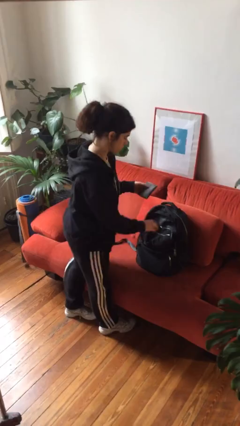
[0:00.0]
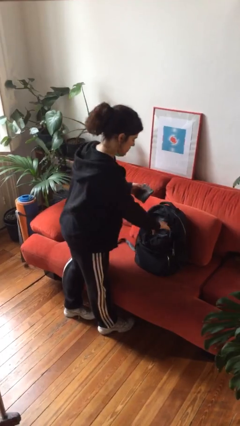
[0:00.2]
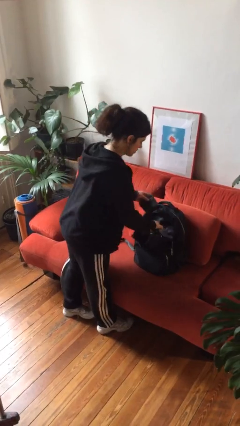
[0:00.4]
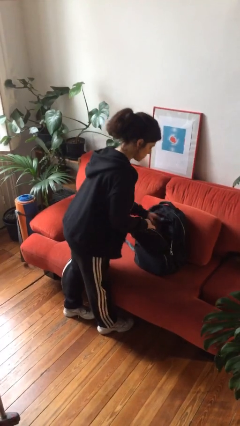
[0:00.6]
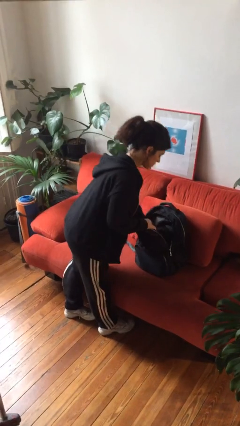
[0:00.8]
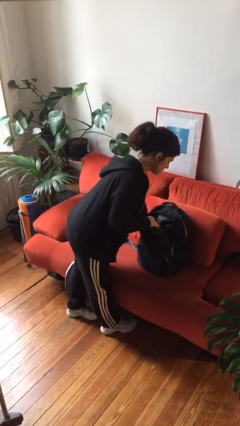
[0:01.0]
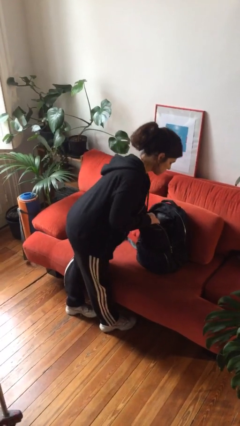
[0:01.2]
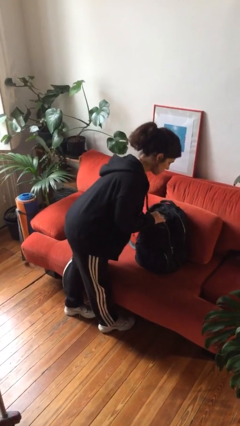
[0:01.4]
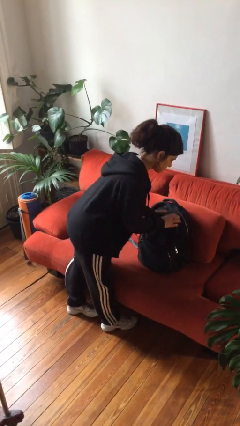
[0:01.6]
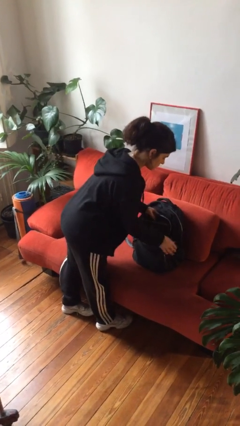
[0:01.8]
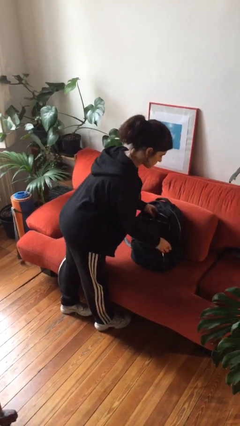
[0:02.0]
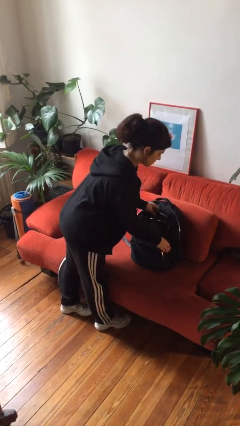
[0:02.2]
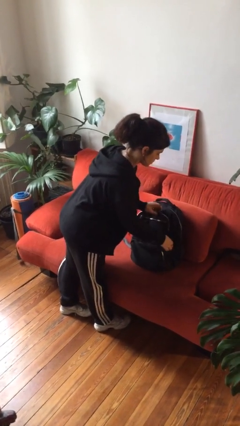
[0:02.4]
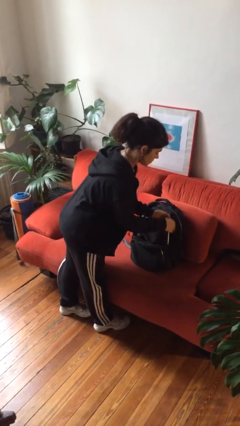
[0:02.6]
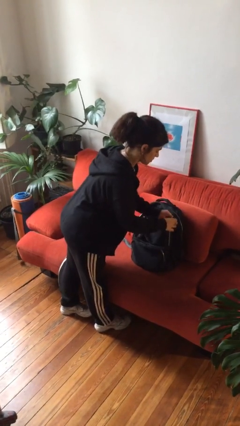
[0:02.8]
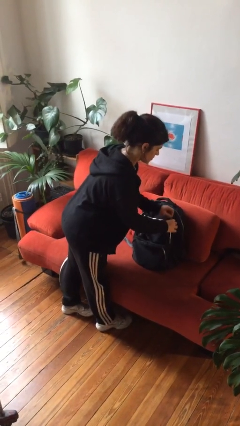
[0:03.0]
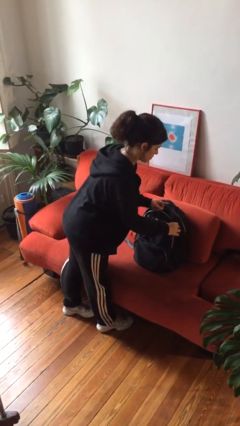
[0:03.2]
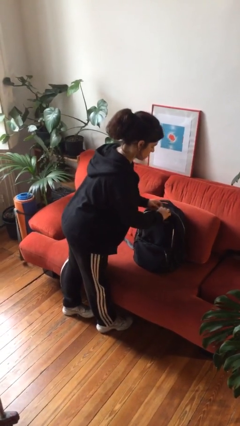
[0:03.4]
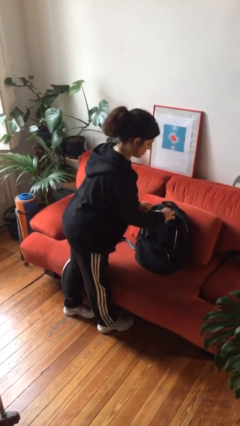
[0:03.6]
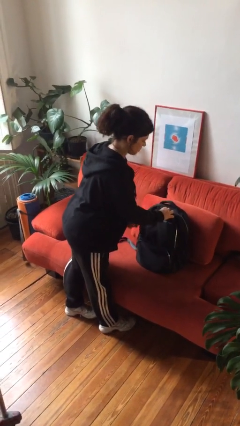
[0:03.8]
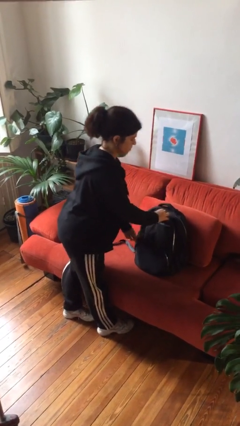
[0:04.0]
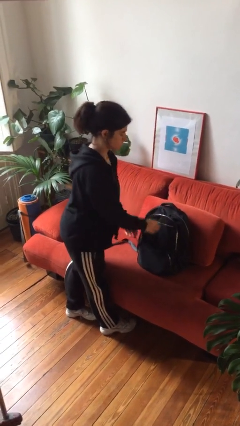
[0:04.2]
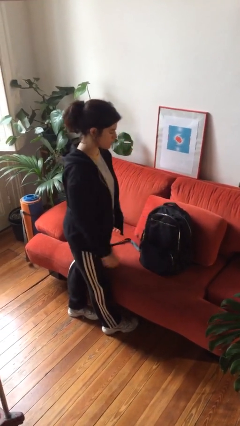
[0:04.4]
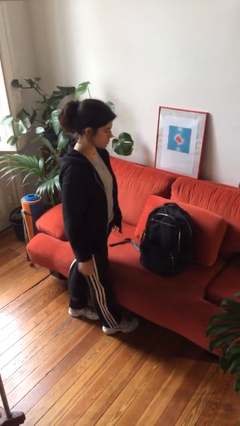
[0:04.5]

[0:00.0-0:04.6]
person puts object into backpack

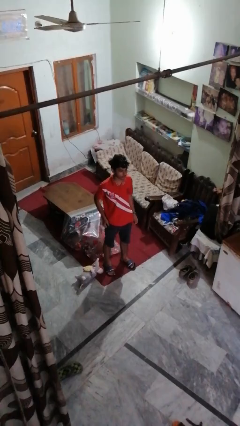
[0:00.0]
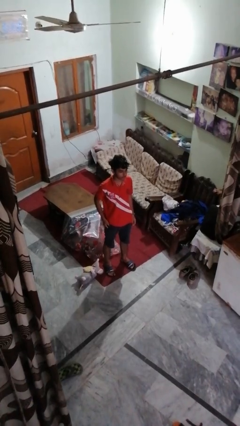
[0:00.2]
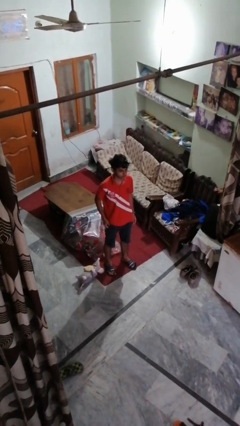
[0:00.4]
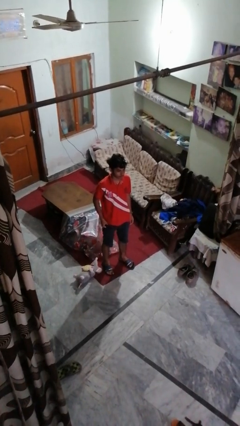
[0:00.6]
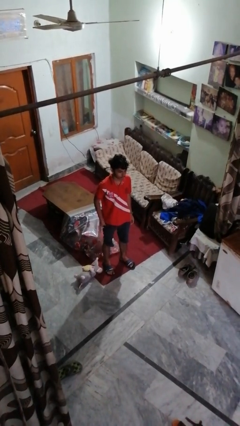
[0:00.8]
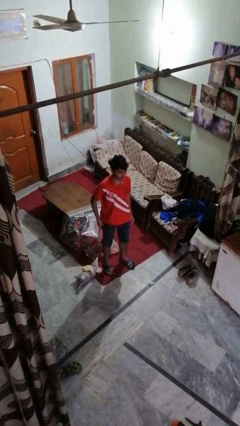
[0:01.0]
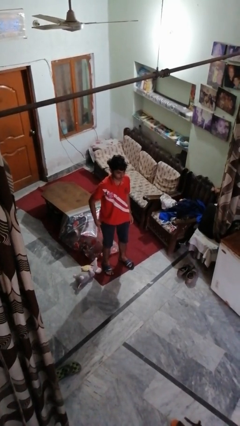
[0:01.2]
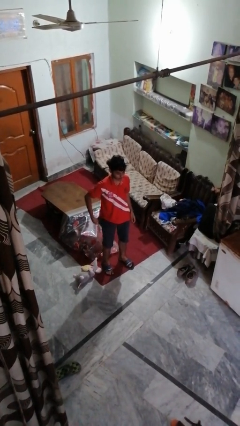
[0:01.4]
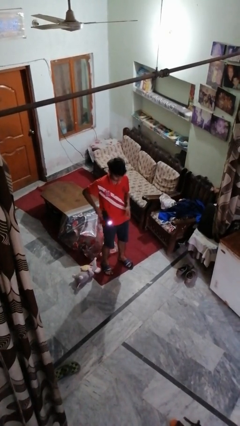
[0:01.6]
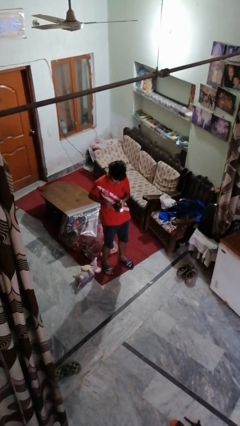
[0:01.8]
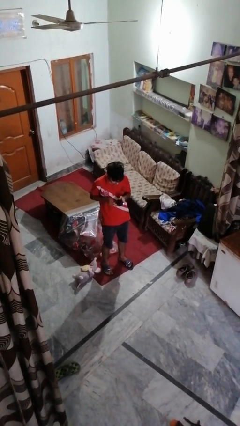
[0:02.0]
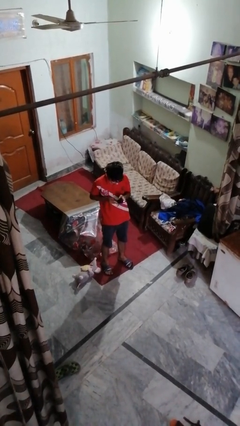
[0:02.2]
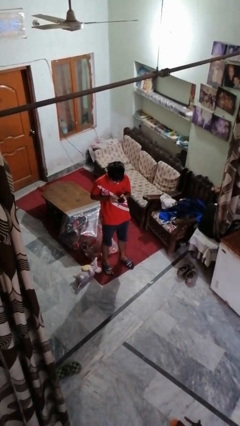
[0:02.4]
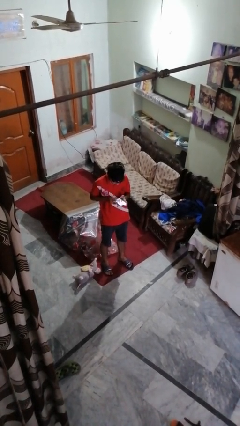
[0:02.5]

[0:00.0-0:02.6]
person takes phone from pocket

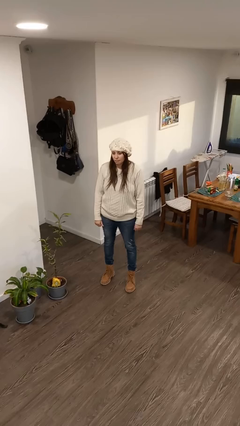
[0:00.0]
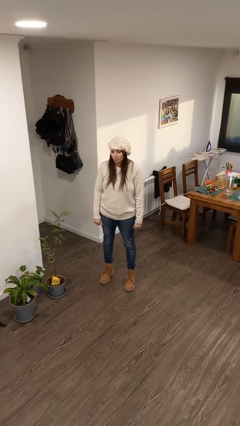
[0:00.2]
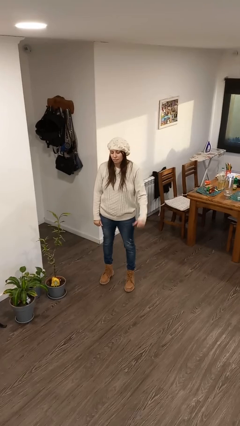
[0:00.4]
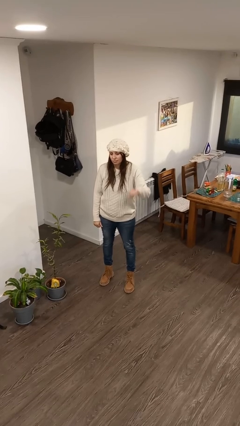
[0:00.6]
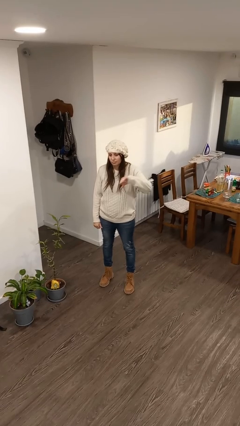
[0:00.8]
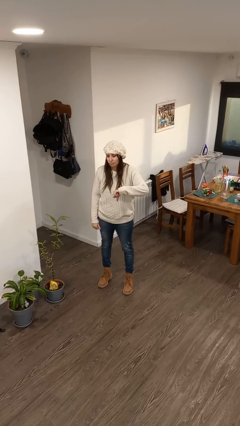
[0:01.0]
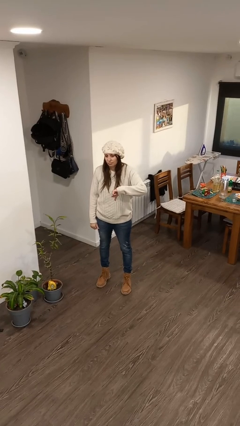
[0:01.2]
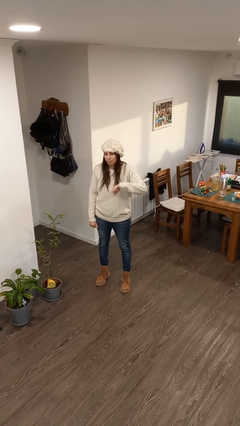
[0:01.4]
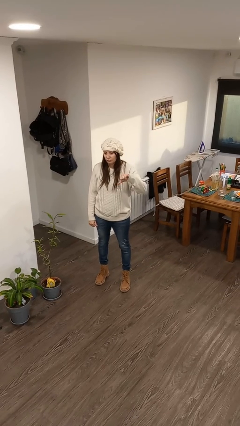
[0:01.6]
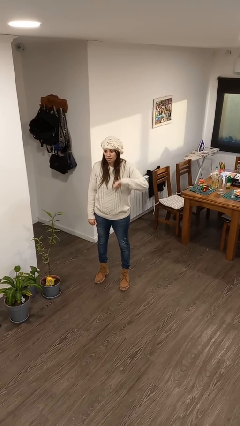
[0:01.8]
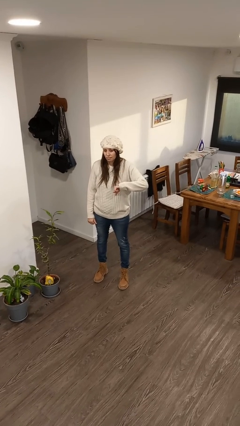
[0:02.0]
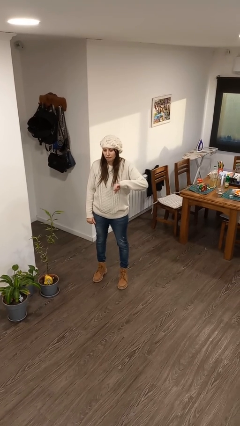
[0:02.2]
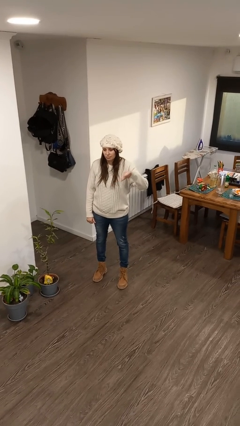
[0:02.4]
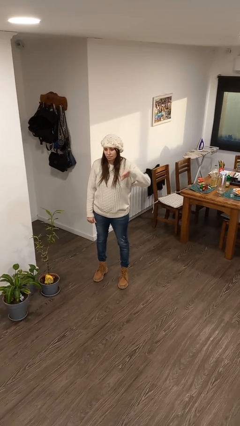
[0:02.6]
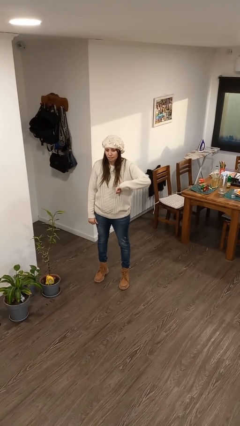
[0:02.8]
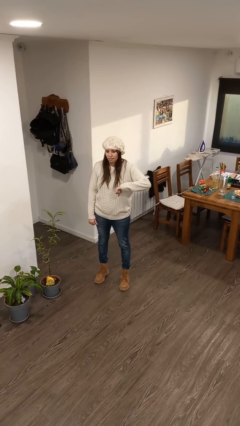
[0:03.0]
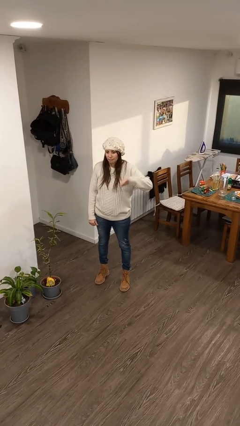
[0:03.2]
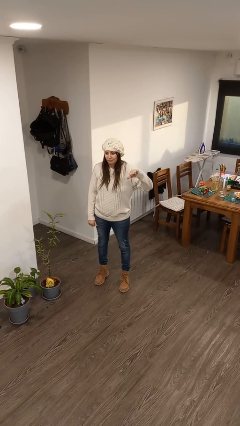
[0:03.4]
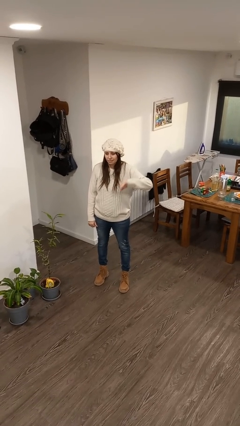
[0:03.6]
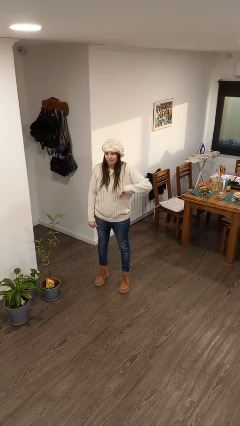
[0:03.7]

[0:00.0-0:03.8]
person gestures thumbs down

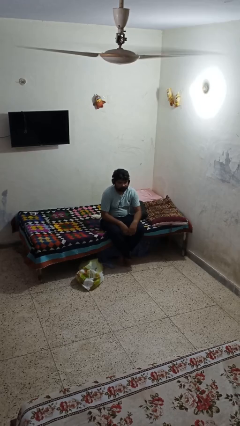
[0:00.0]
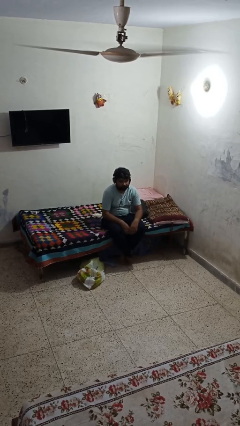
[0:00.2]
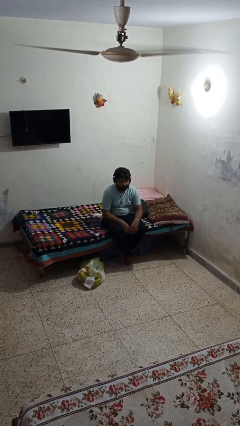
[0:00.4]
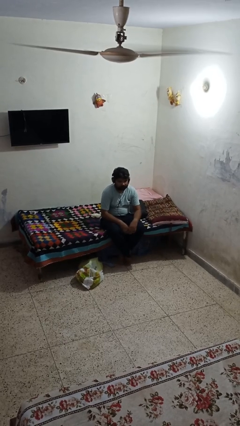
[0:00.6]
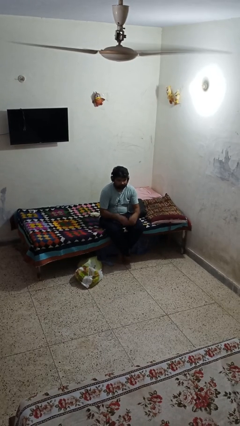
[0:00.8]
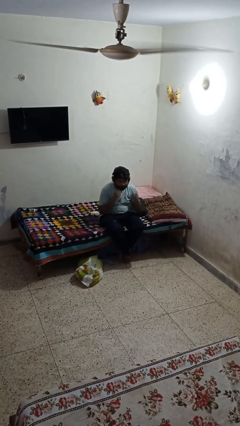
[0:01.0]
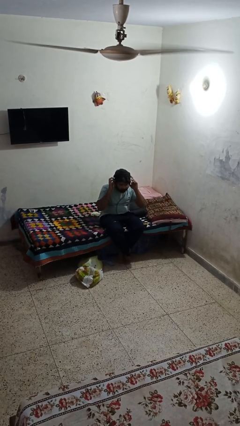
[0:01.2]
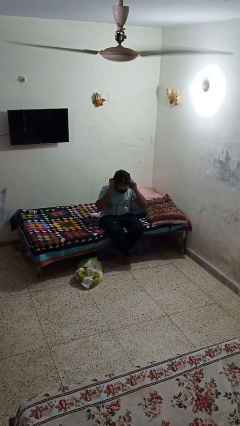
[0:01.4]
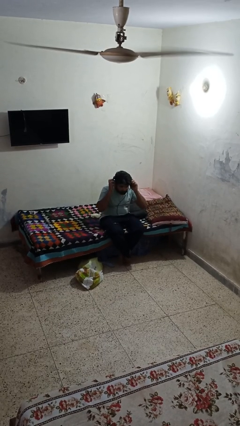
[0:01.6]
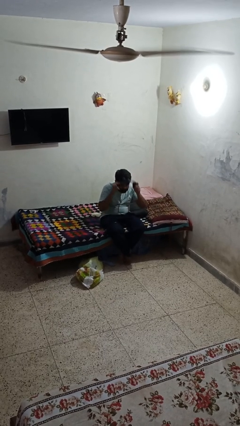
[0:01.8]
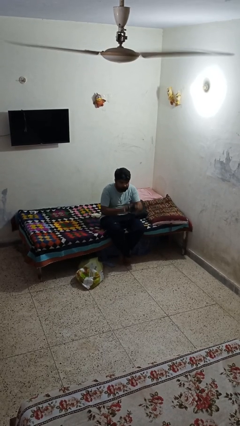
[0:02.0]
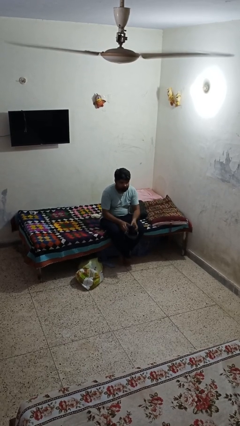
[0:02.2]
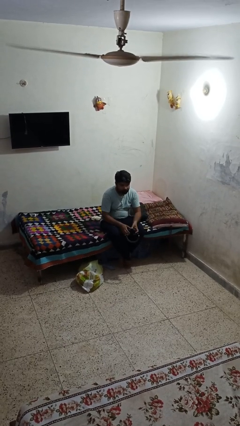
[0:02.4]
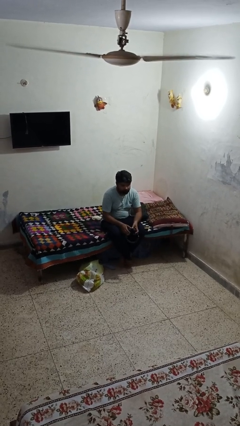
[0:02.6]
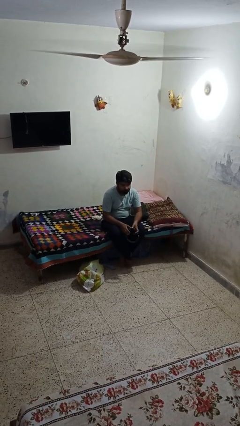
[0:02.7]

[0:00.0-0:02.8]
person takes off headphones

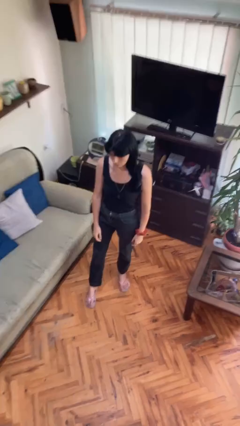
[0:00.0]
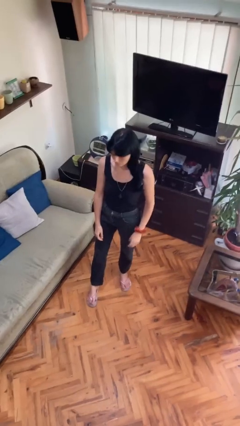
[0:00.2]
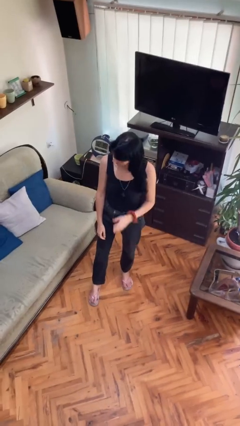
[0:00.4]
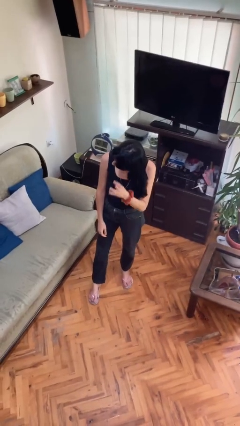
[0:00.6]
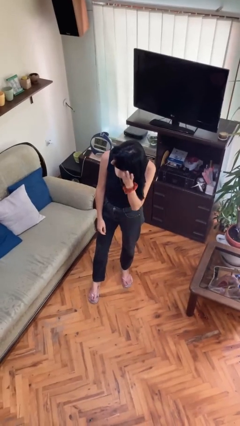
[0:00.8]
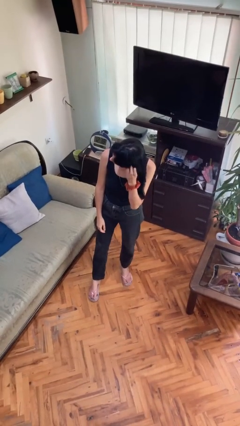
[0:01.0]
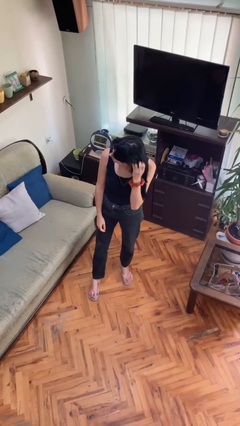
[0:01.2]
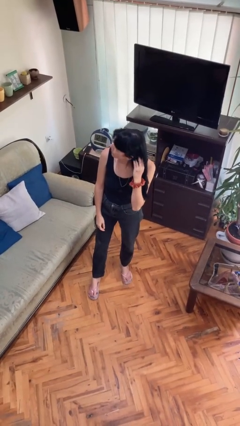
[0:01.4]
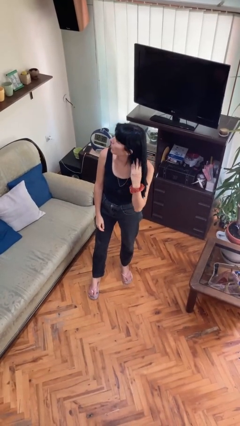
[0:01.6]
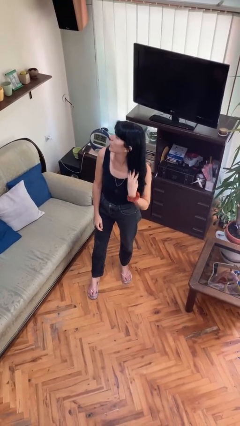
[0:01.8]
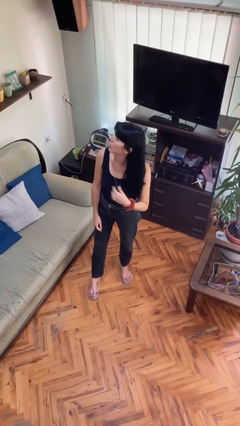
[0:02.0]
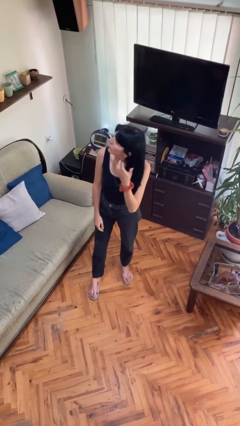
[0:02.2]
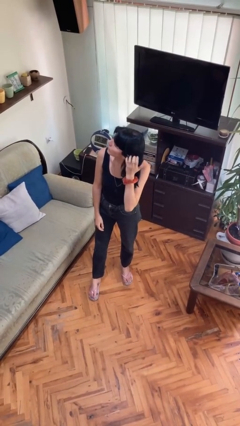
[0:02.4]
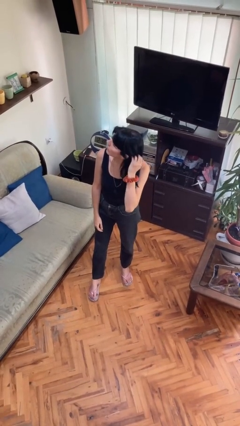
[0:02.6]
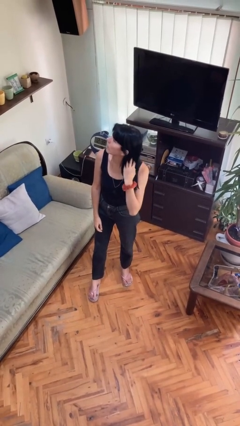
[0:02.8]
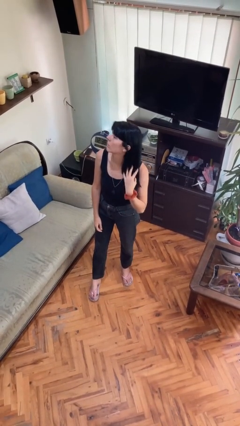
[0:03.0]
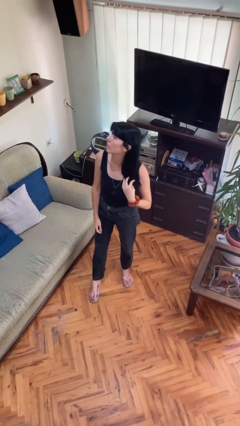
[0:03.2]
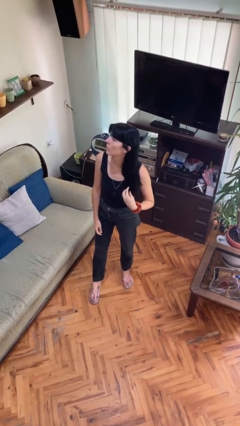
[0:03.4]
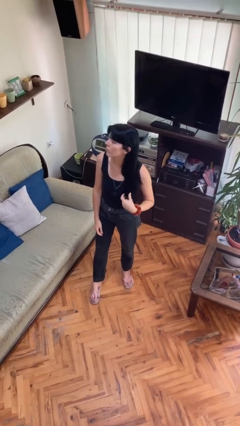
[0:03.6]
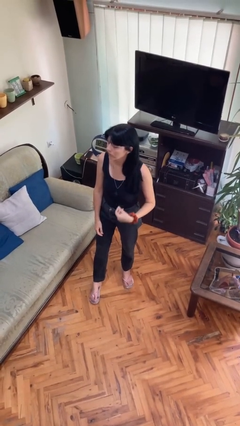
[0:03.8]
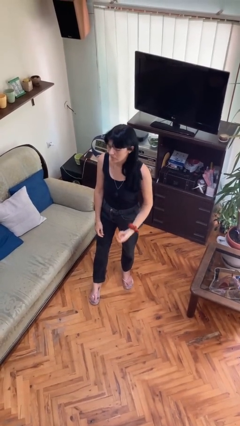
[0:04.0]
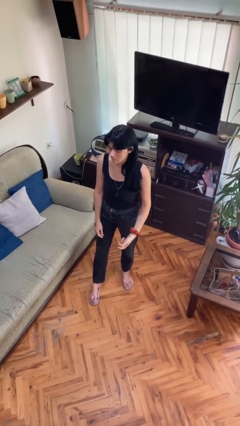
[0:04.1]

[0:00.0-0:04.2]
person strokes hair
